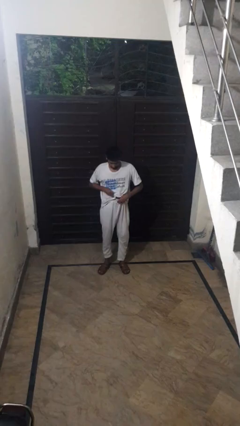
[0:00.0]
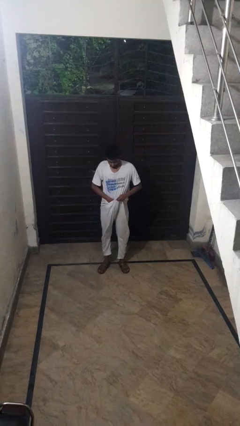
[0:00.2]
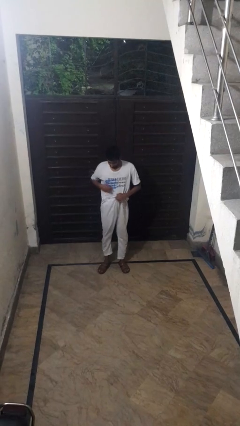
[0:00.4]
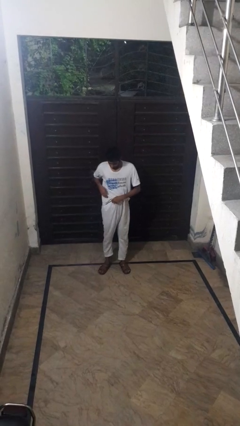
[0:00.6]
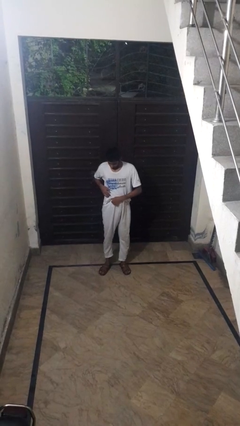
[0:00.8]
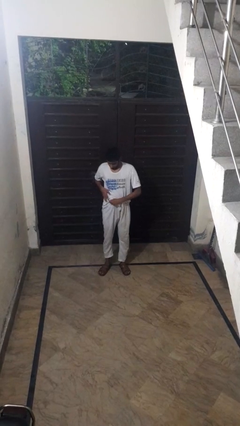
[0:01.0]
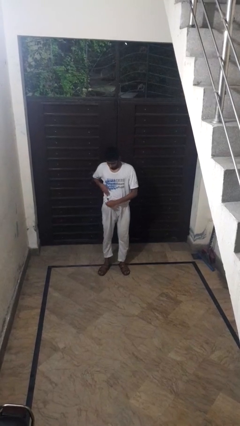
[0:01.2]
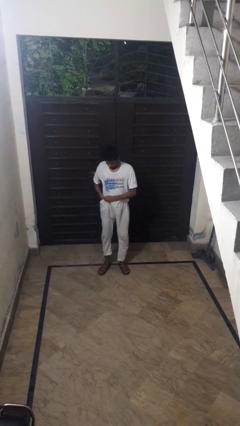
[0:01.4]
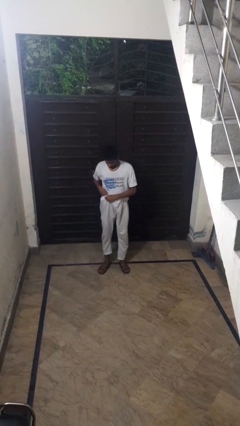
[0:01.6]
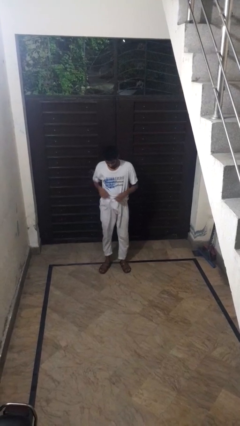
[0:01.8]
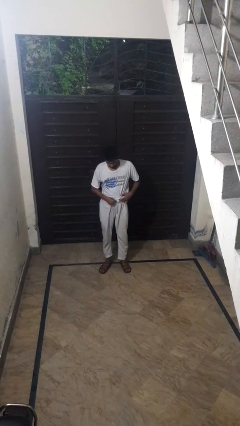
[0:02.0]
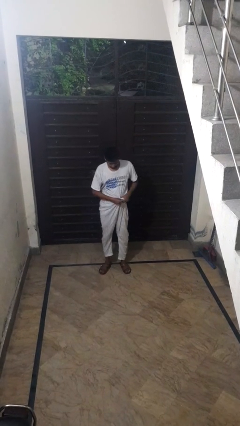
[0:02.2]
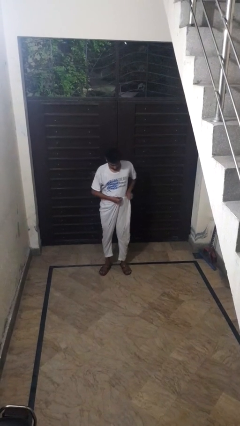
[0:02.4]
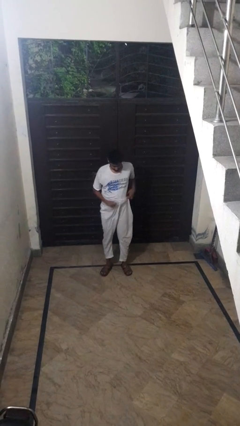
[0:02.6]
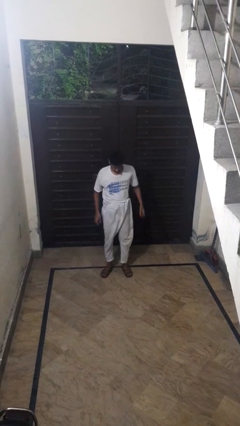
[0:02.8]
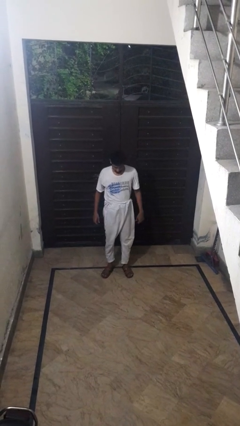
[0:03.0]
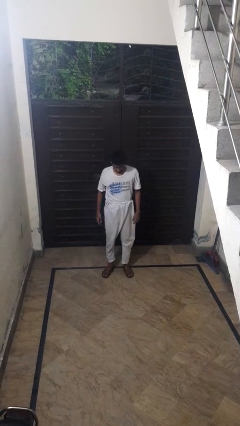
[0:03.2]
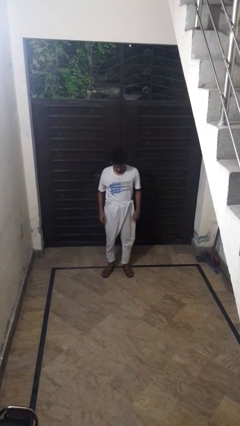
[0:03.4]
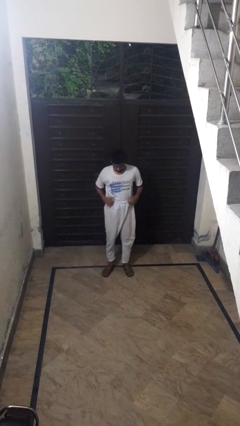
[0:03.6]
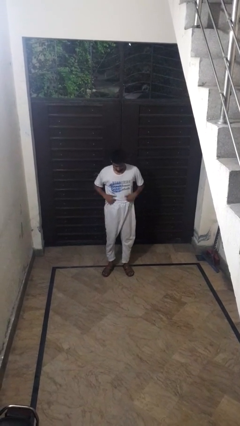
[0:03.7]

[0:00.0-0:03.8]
person tucks in shirt

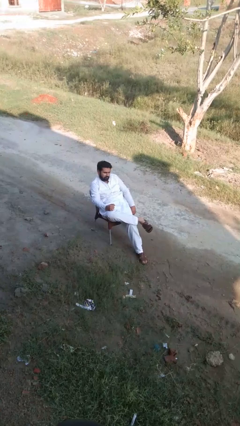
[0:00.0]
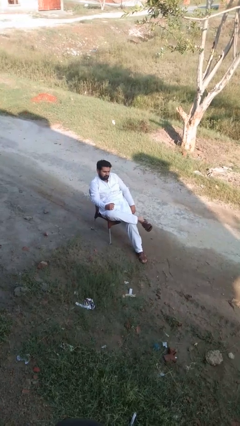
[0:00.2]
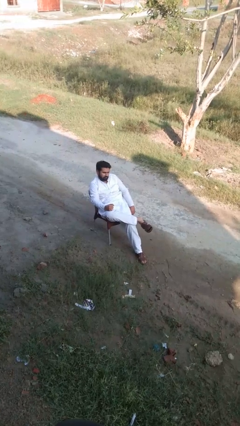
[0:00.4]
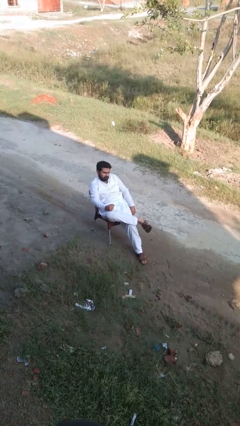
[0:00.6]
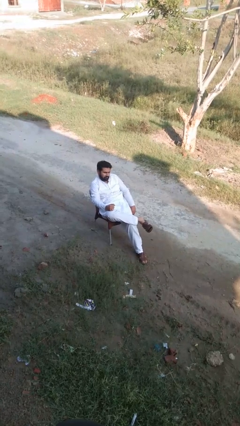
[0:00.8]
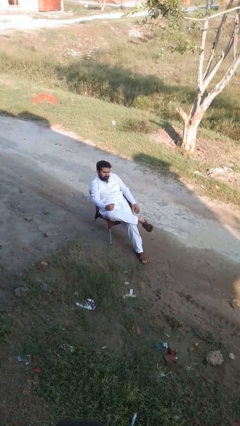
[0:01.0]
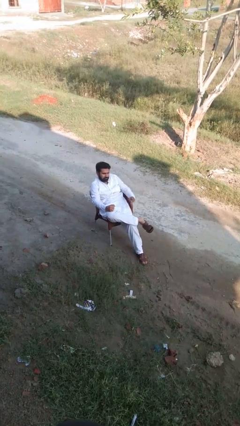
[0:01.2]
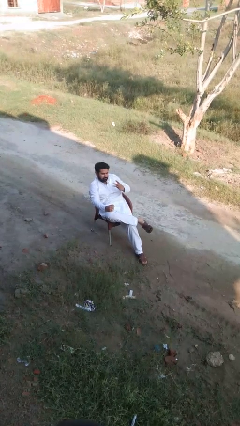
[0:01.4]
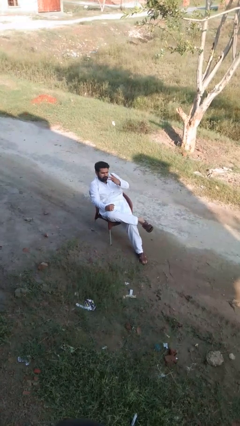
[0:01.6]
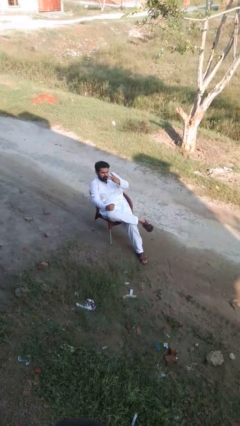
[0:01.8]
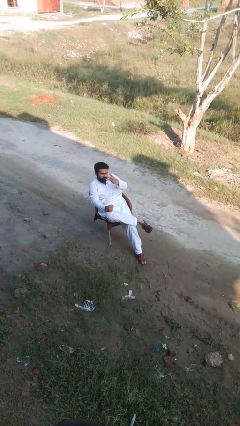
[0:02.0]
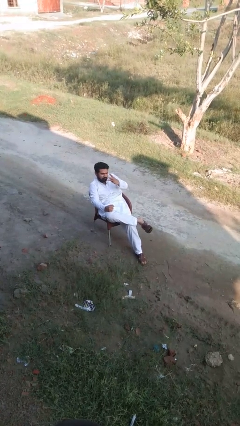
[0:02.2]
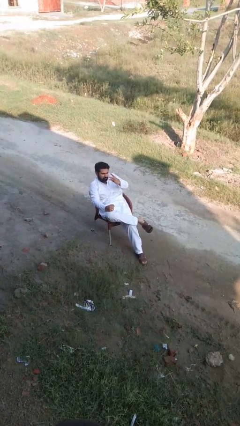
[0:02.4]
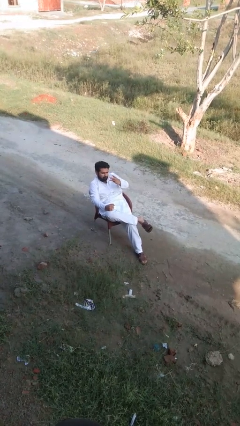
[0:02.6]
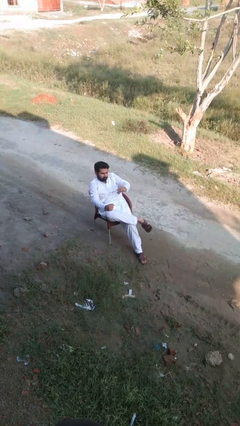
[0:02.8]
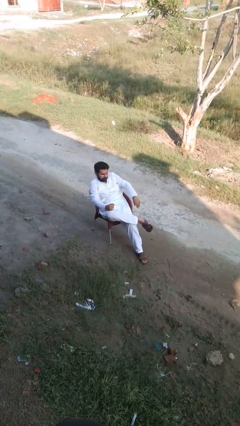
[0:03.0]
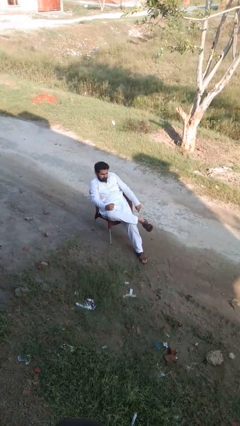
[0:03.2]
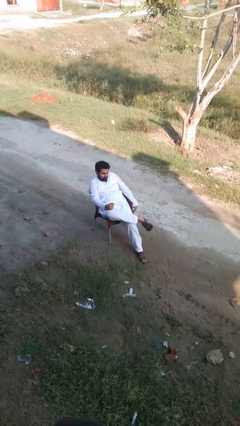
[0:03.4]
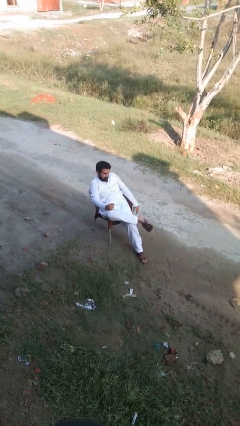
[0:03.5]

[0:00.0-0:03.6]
person gestures number three

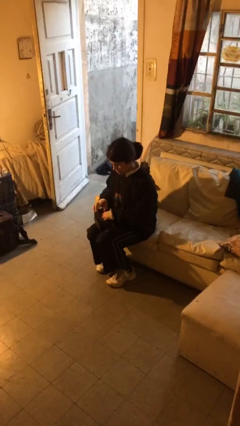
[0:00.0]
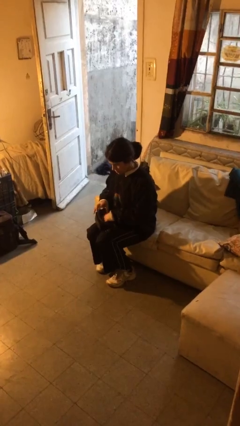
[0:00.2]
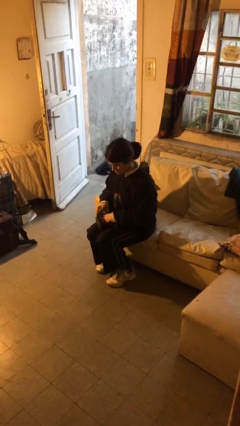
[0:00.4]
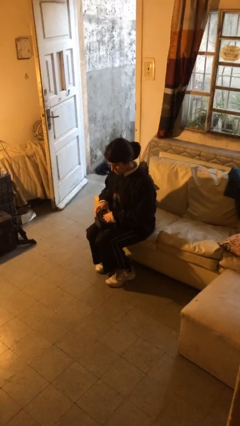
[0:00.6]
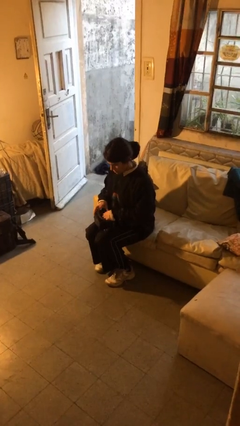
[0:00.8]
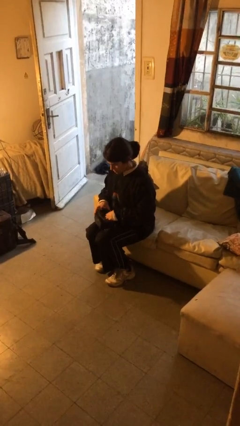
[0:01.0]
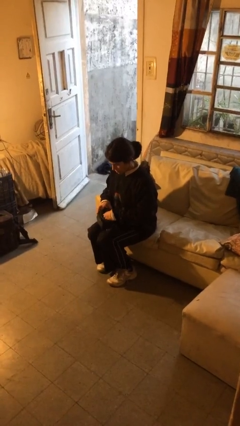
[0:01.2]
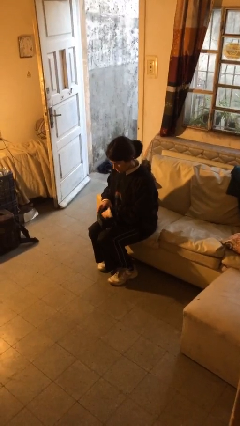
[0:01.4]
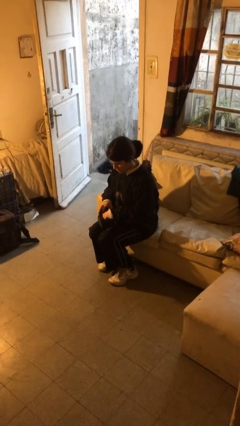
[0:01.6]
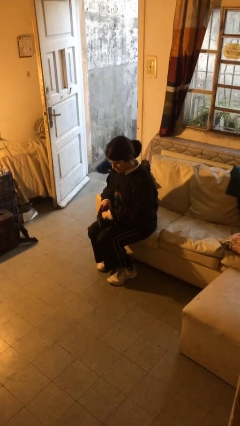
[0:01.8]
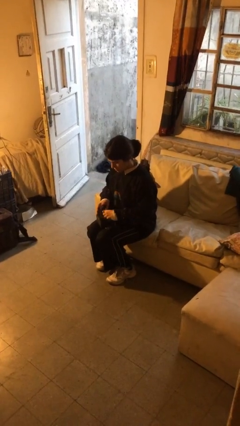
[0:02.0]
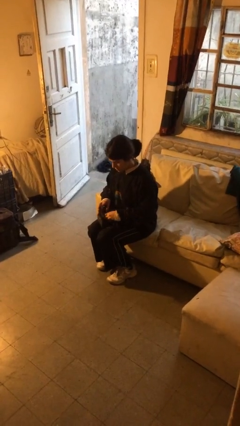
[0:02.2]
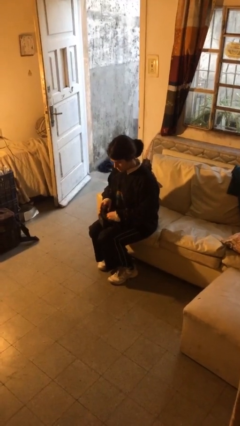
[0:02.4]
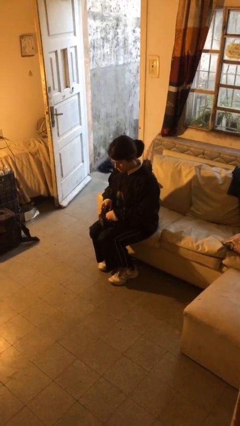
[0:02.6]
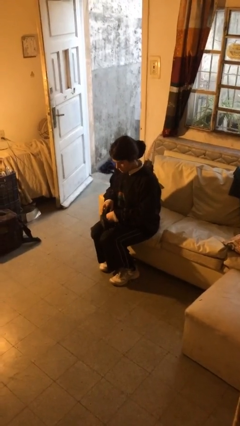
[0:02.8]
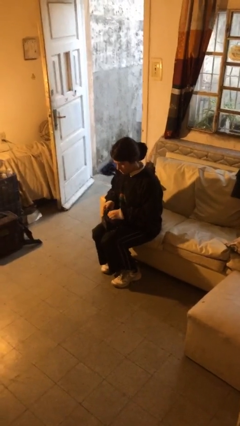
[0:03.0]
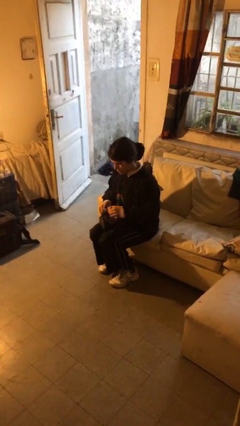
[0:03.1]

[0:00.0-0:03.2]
person searches in purse

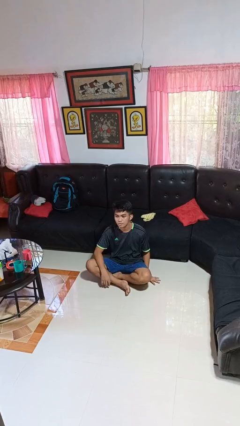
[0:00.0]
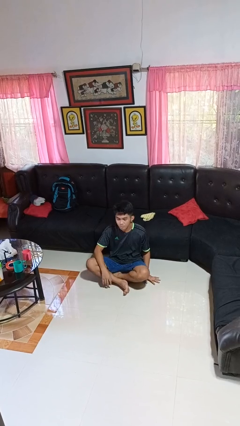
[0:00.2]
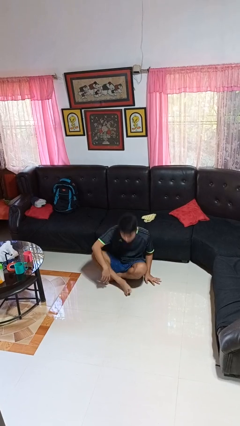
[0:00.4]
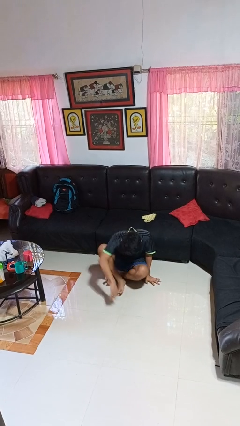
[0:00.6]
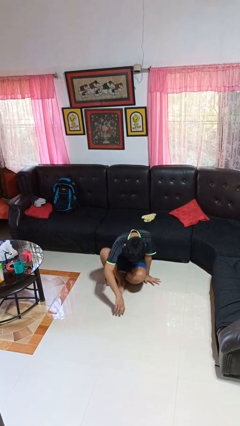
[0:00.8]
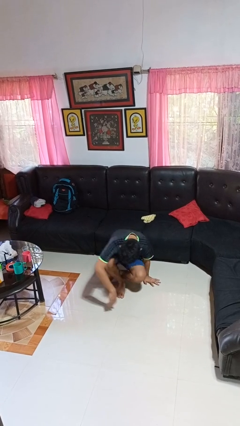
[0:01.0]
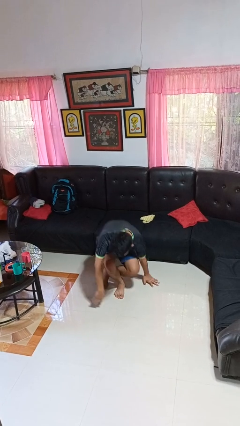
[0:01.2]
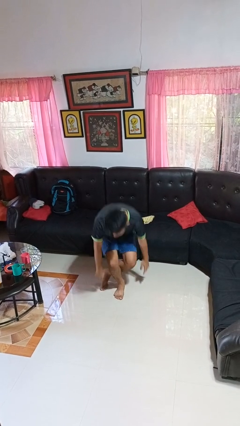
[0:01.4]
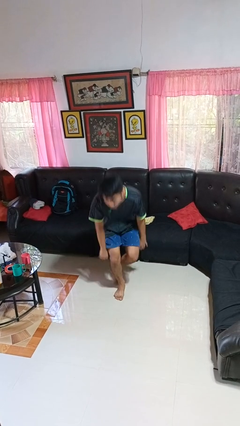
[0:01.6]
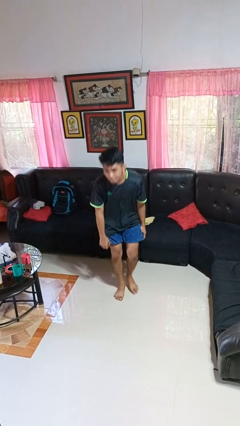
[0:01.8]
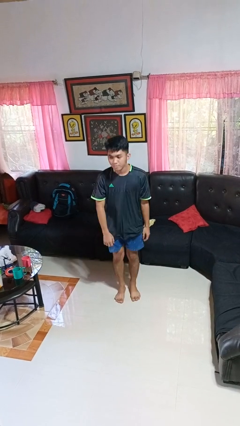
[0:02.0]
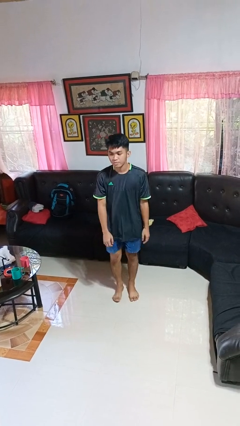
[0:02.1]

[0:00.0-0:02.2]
person stands up from floor

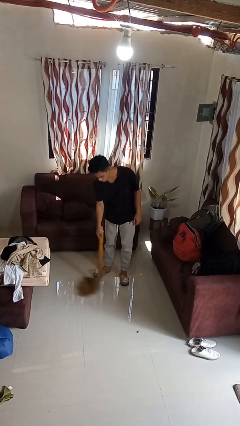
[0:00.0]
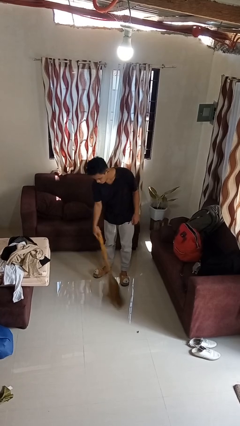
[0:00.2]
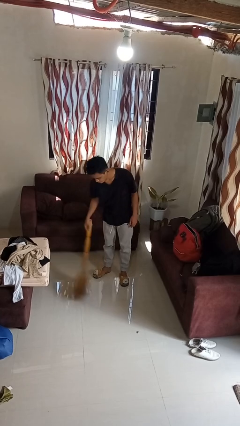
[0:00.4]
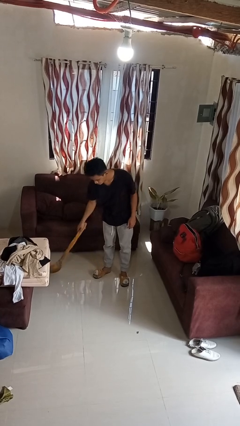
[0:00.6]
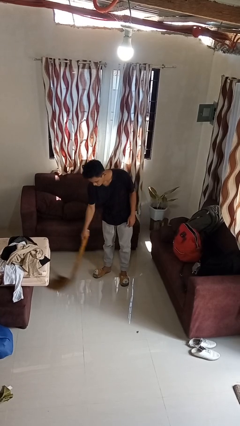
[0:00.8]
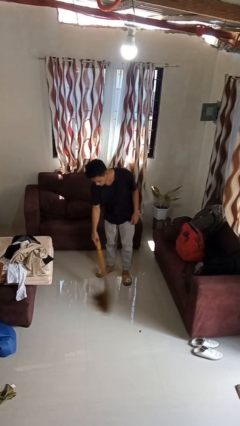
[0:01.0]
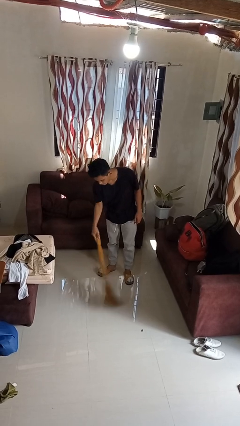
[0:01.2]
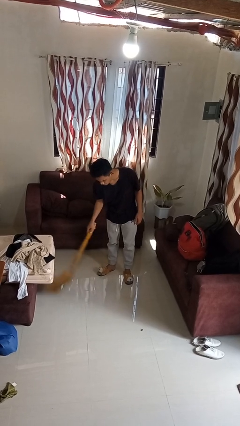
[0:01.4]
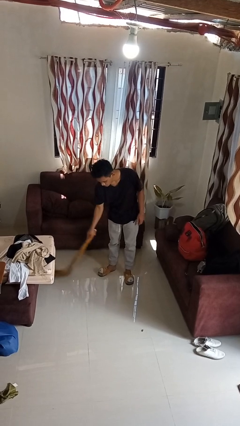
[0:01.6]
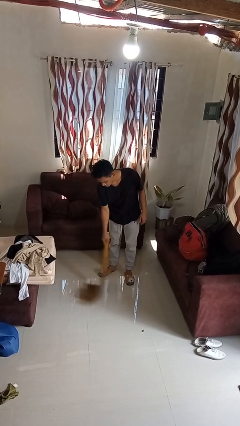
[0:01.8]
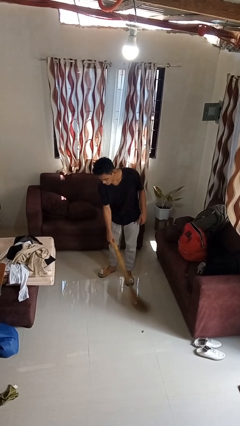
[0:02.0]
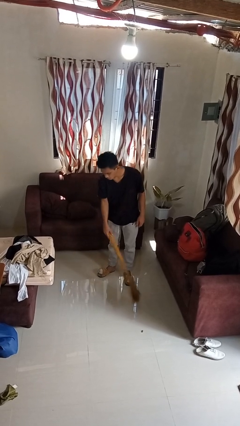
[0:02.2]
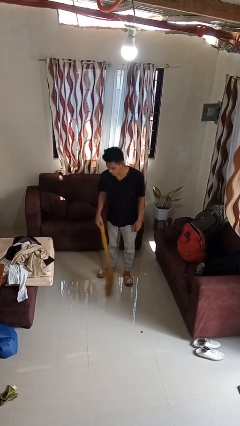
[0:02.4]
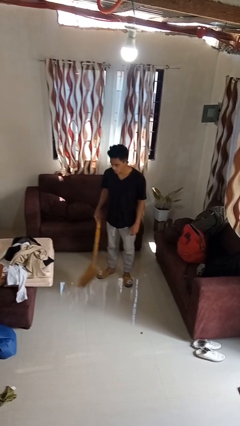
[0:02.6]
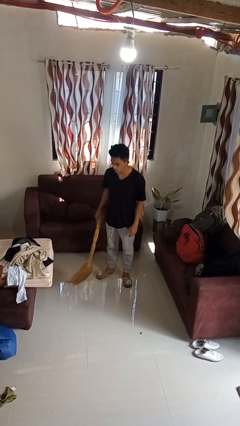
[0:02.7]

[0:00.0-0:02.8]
person sweeps floor

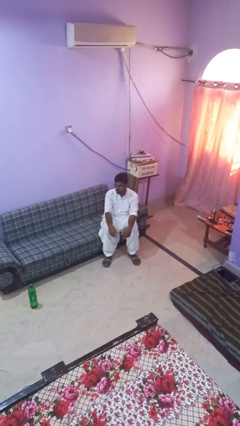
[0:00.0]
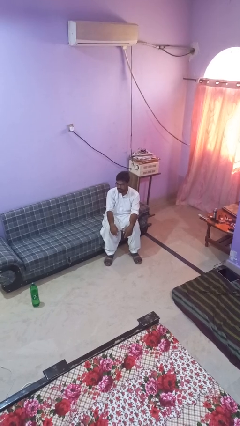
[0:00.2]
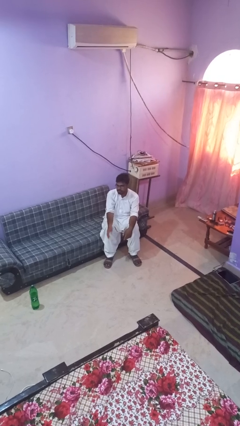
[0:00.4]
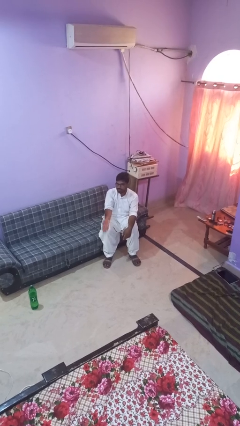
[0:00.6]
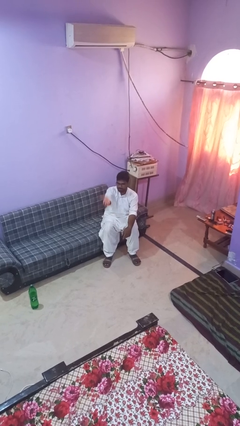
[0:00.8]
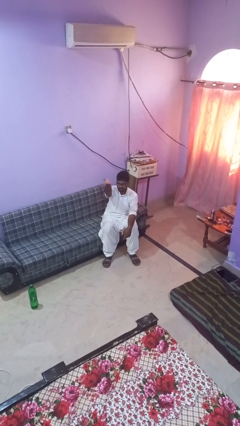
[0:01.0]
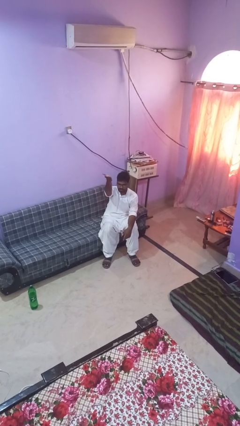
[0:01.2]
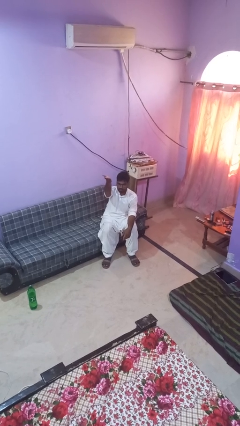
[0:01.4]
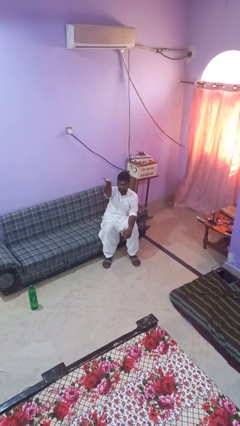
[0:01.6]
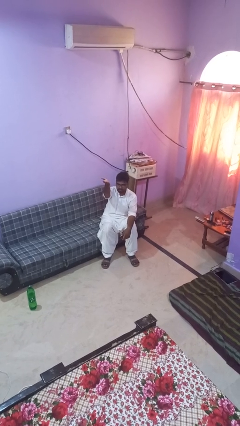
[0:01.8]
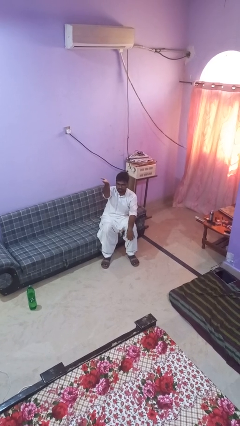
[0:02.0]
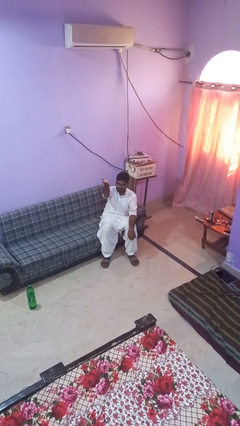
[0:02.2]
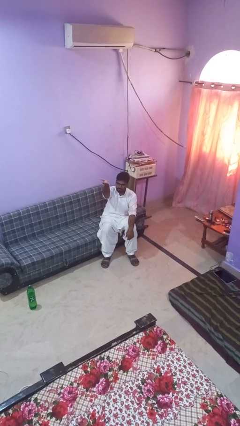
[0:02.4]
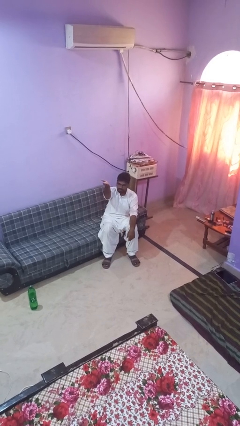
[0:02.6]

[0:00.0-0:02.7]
person gestures swipe up
